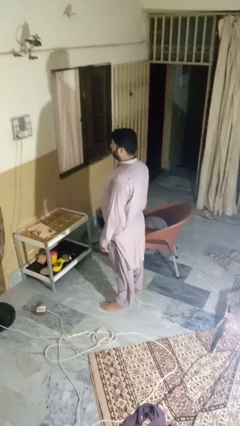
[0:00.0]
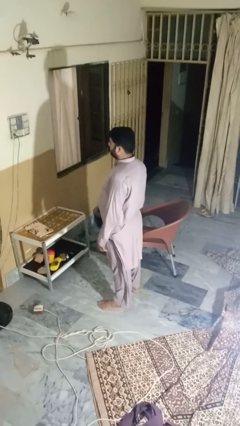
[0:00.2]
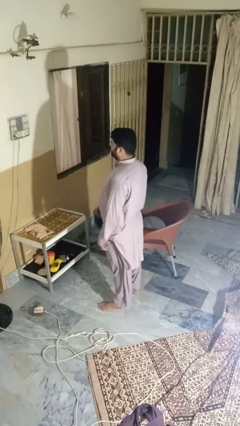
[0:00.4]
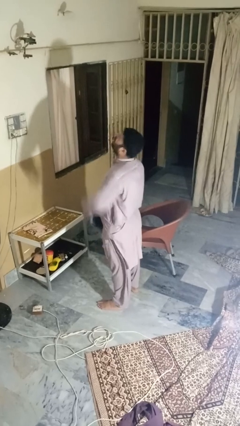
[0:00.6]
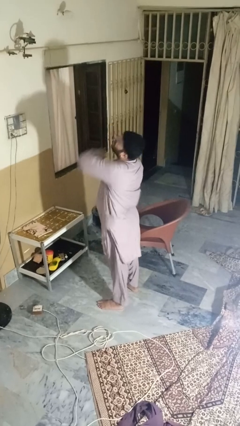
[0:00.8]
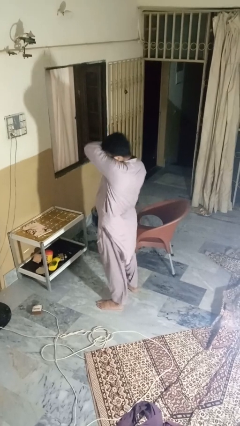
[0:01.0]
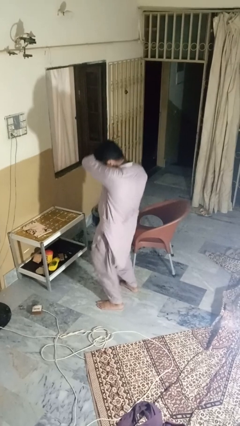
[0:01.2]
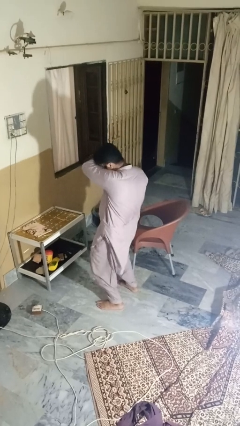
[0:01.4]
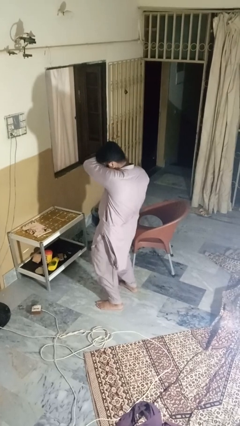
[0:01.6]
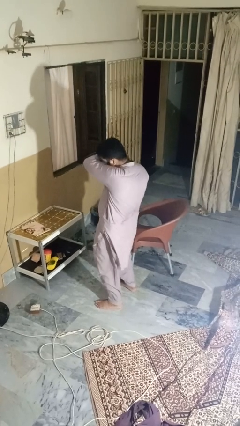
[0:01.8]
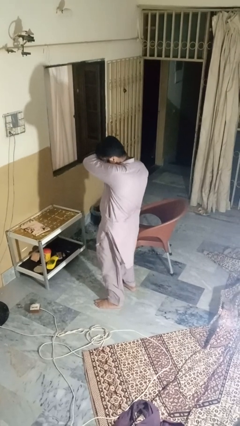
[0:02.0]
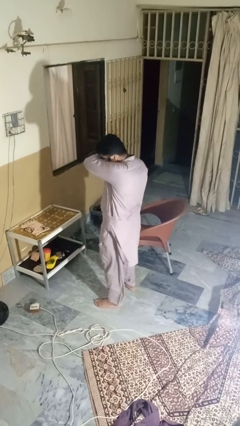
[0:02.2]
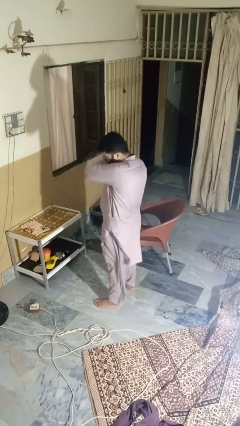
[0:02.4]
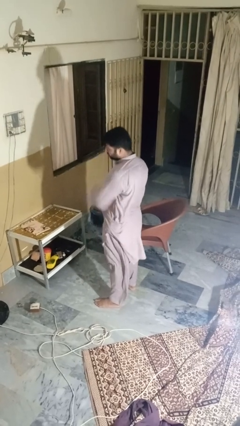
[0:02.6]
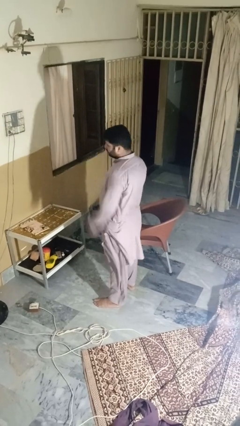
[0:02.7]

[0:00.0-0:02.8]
person sneezes into arm

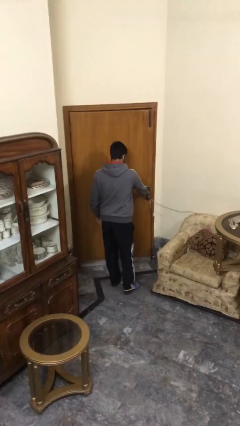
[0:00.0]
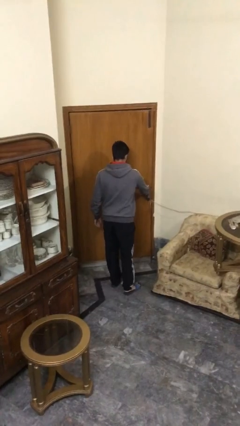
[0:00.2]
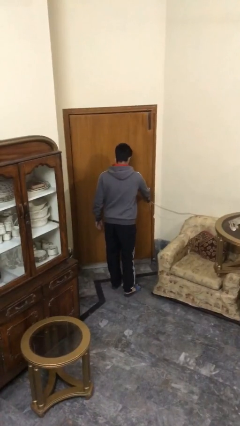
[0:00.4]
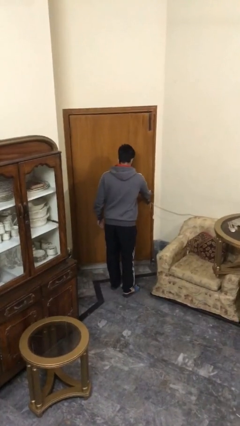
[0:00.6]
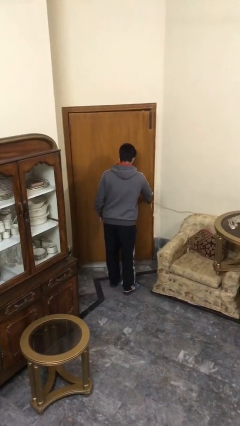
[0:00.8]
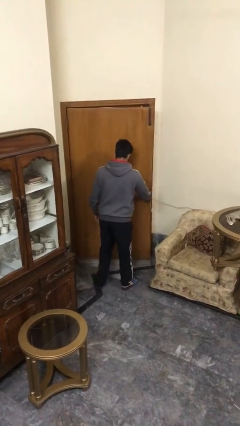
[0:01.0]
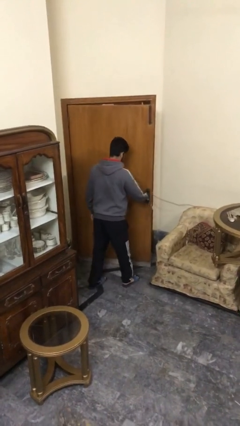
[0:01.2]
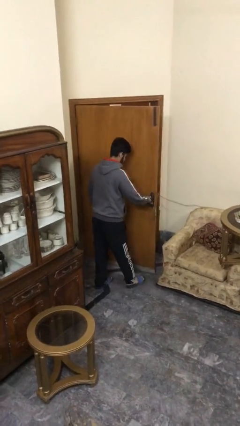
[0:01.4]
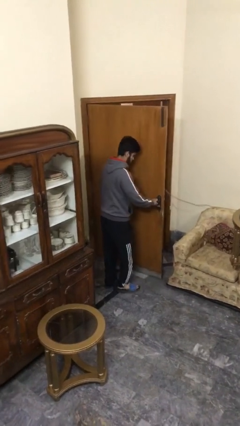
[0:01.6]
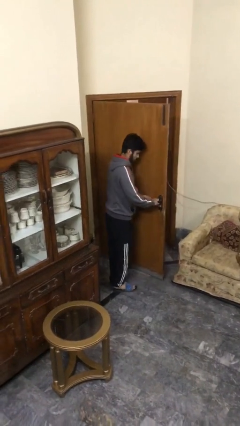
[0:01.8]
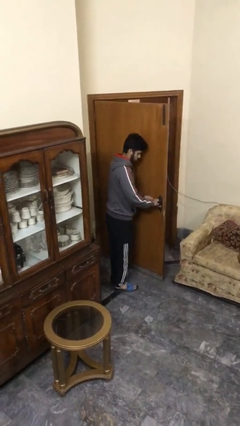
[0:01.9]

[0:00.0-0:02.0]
person opens facility door

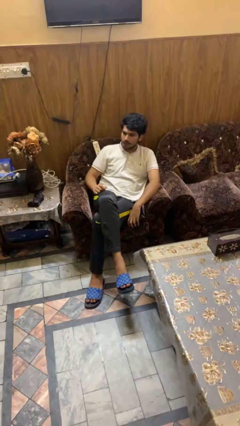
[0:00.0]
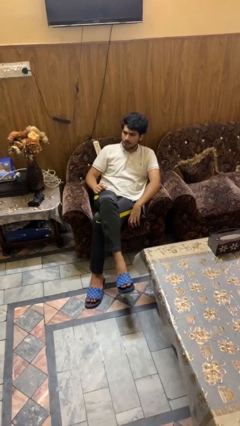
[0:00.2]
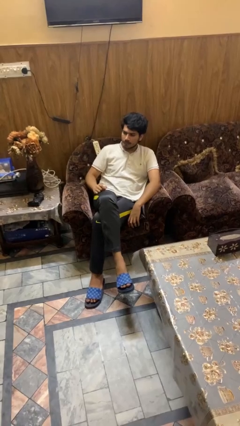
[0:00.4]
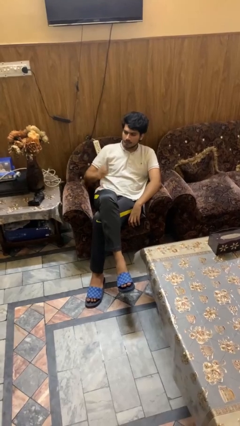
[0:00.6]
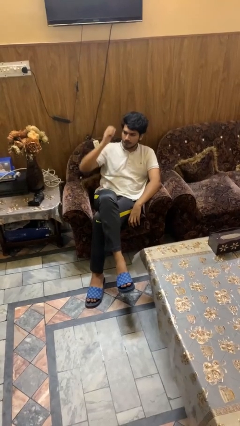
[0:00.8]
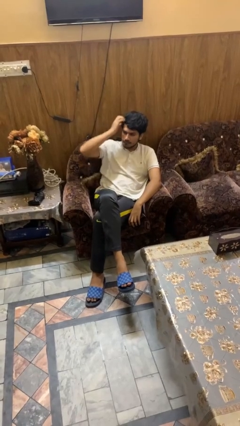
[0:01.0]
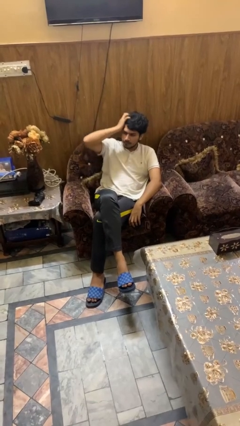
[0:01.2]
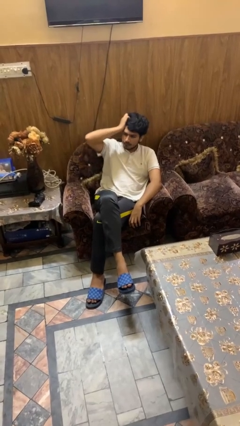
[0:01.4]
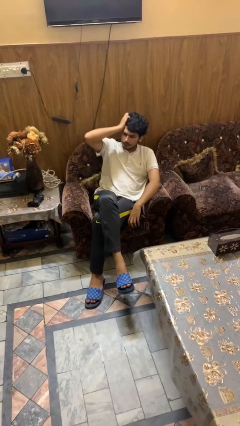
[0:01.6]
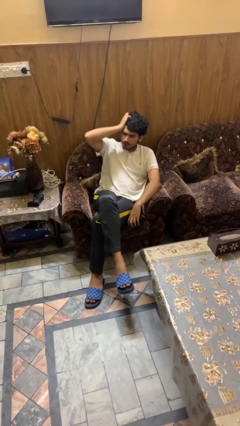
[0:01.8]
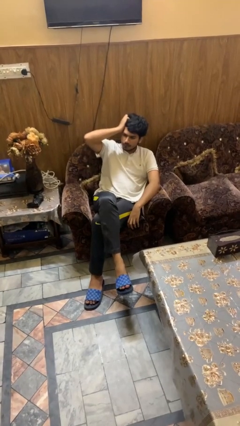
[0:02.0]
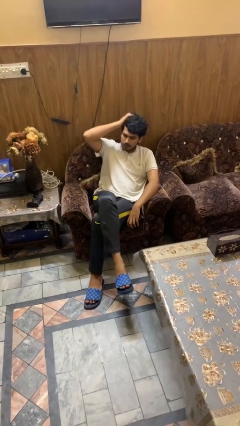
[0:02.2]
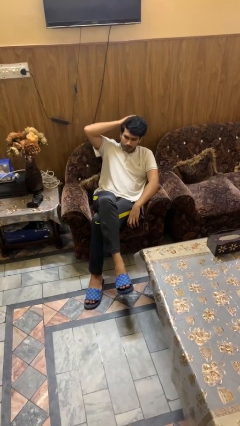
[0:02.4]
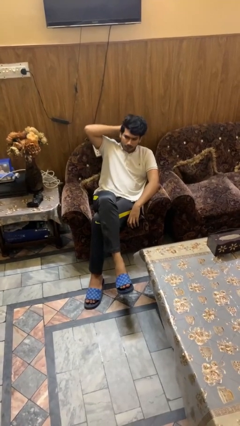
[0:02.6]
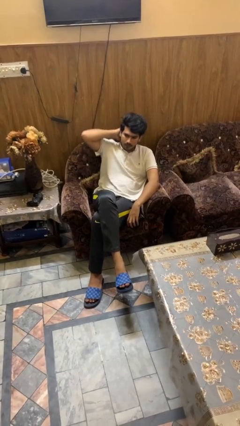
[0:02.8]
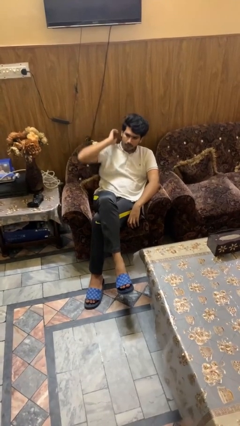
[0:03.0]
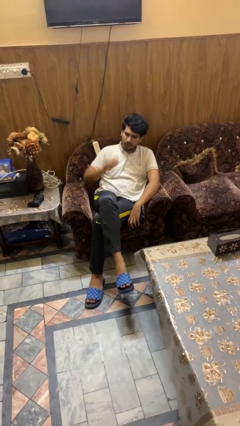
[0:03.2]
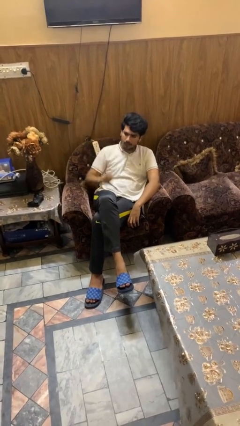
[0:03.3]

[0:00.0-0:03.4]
person scratches face

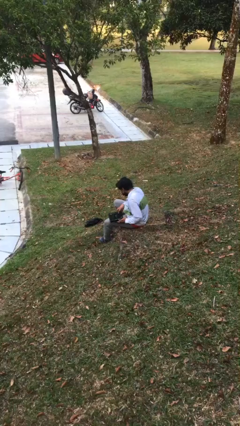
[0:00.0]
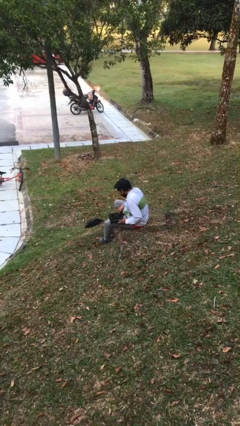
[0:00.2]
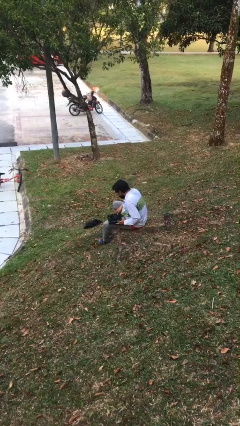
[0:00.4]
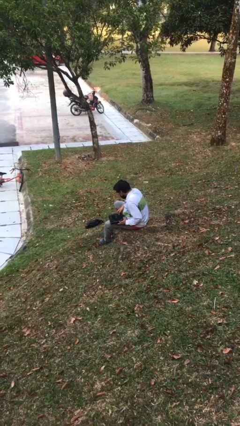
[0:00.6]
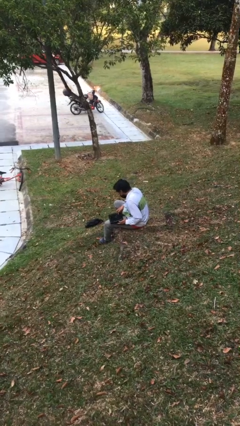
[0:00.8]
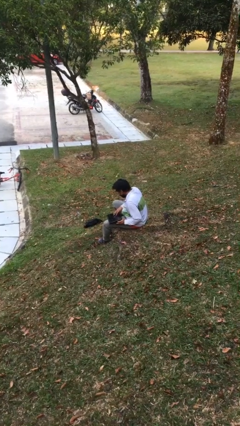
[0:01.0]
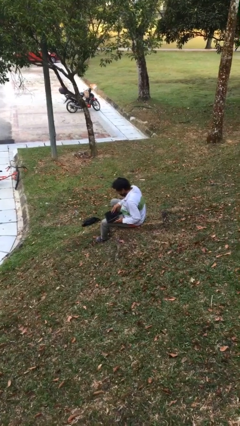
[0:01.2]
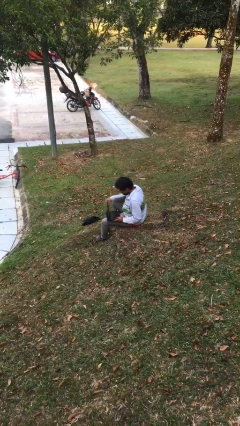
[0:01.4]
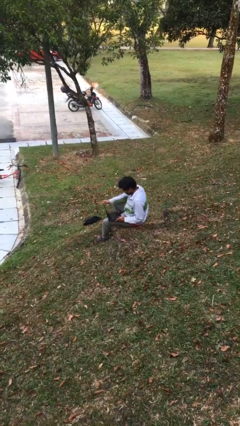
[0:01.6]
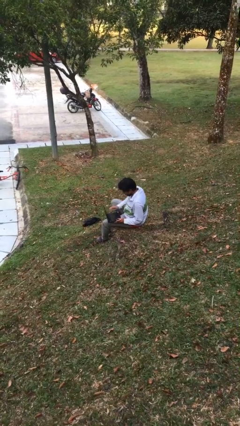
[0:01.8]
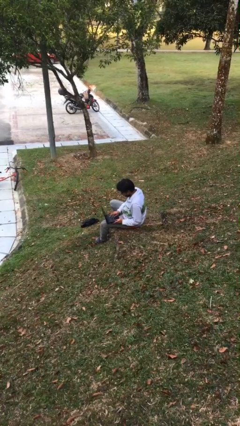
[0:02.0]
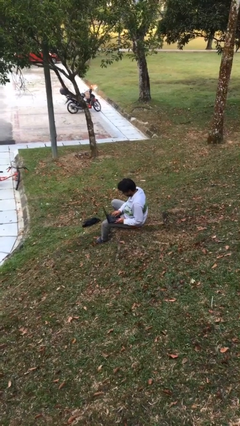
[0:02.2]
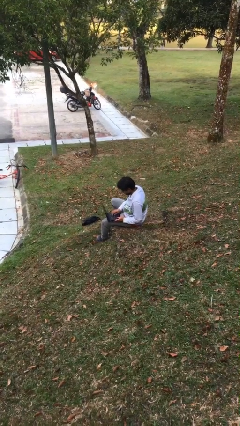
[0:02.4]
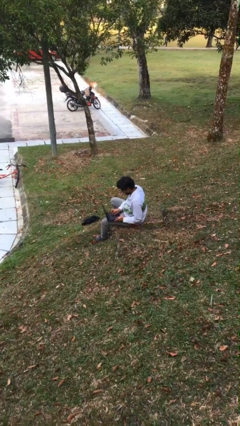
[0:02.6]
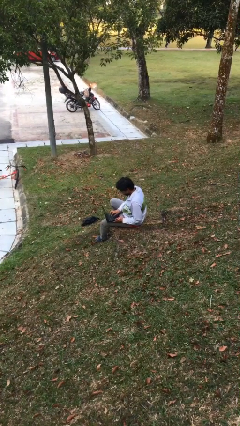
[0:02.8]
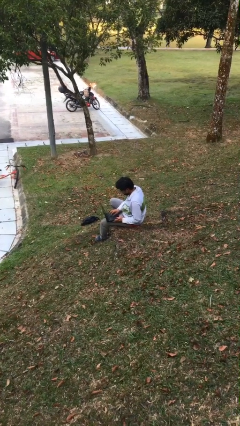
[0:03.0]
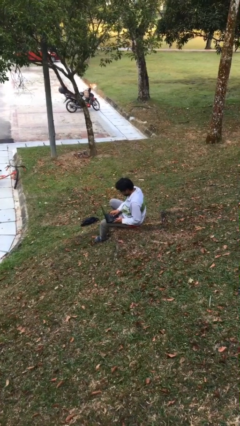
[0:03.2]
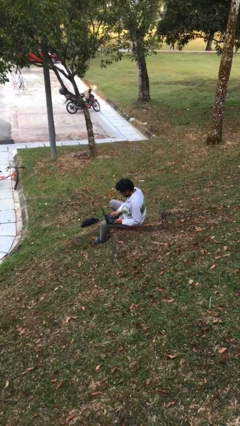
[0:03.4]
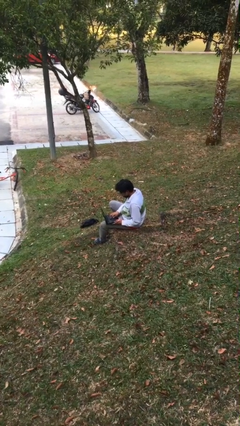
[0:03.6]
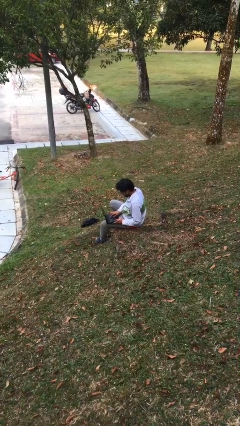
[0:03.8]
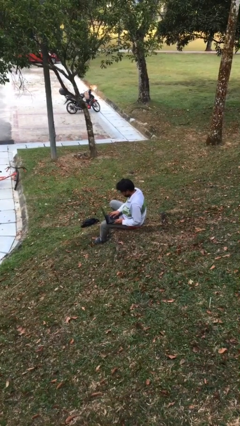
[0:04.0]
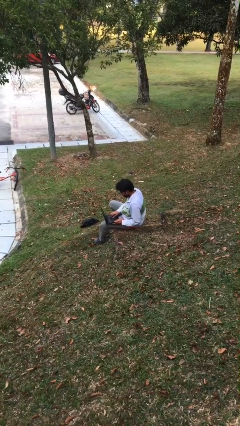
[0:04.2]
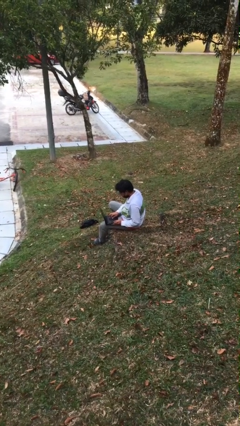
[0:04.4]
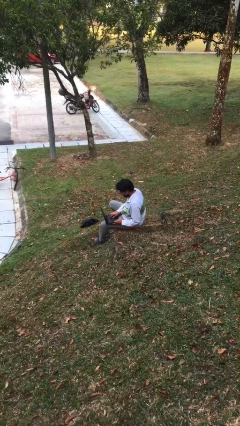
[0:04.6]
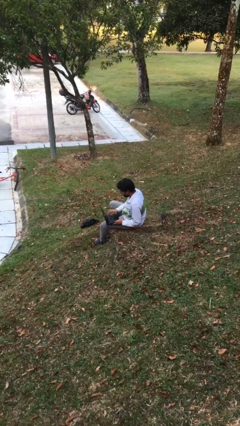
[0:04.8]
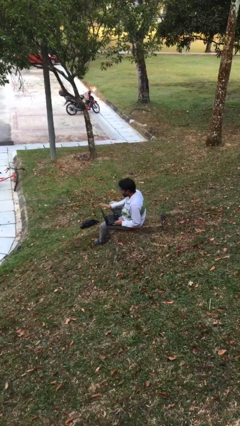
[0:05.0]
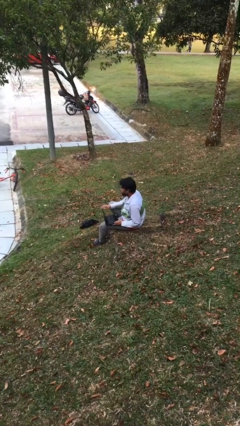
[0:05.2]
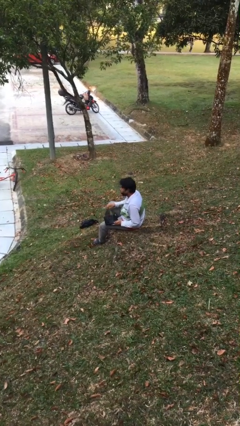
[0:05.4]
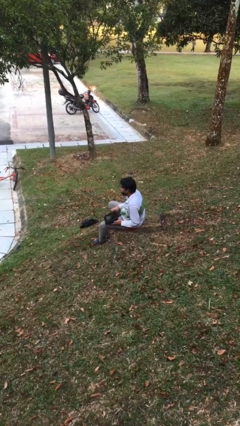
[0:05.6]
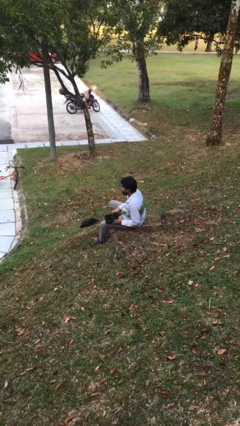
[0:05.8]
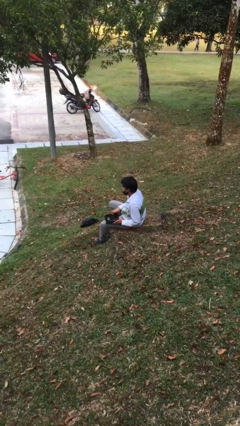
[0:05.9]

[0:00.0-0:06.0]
person interacts with laptop

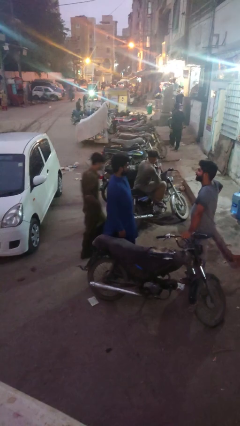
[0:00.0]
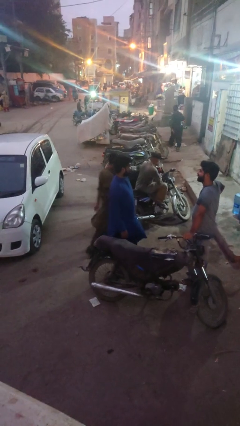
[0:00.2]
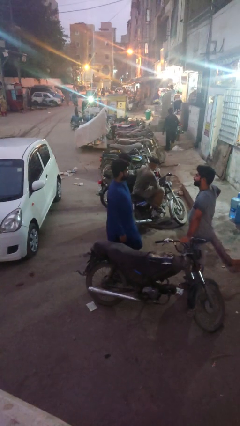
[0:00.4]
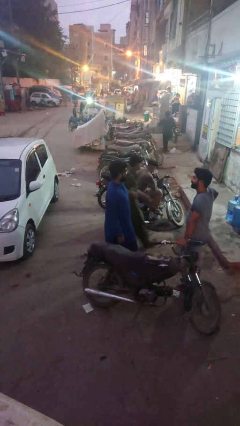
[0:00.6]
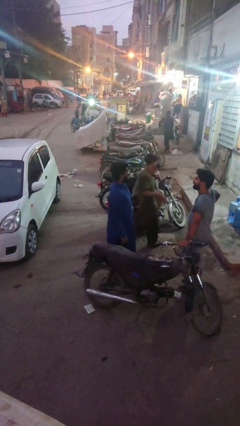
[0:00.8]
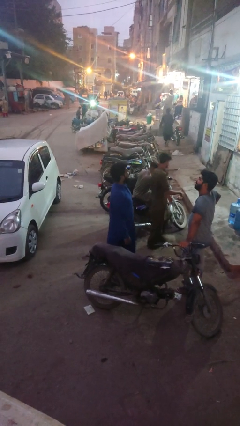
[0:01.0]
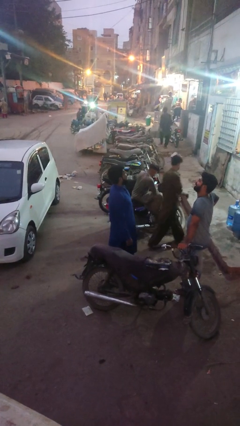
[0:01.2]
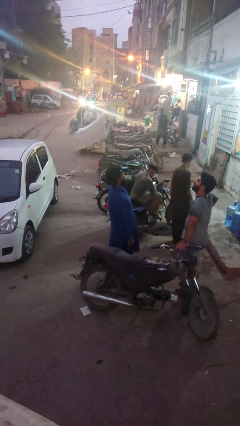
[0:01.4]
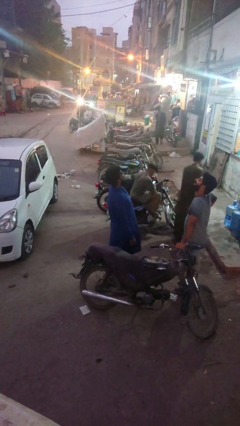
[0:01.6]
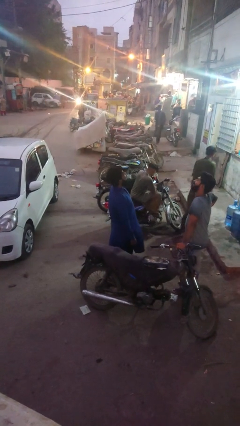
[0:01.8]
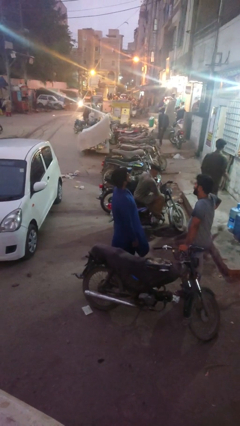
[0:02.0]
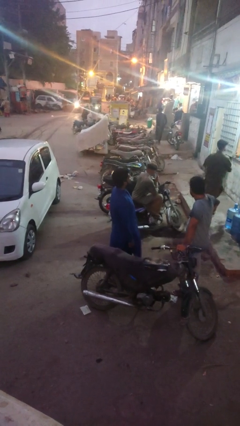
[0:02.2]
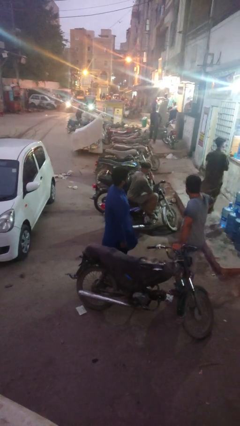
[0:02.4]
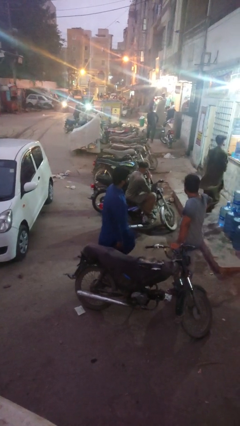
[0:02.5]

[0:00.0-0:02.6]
person laughs with person

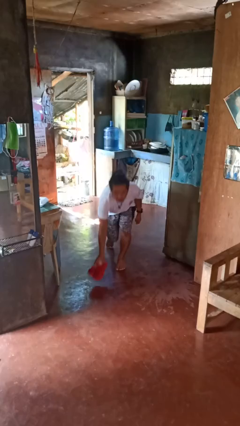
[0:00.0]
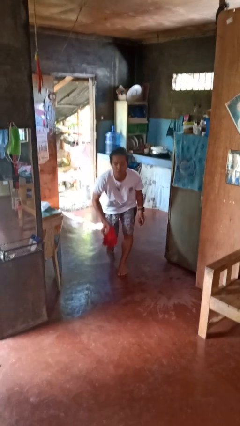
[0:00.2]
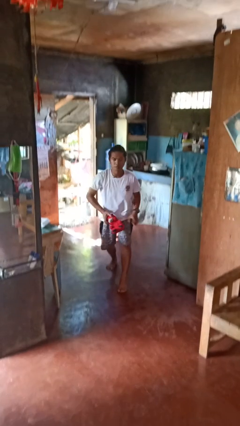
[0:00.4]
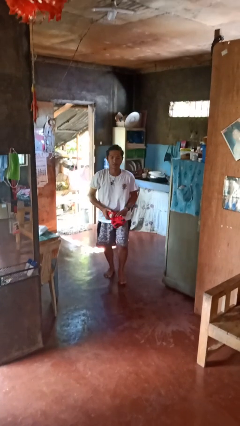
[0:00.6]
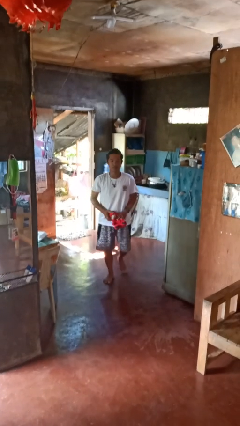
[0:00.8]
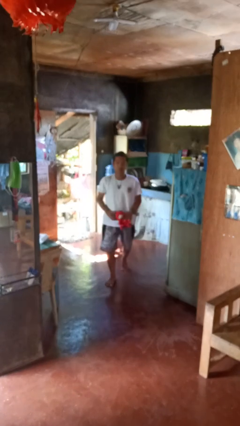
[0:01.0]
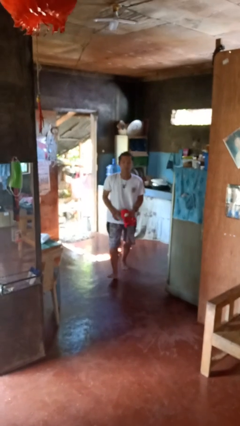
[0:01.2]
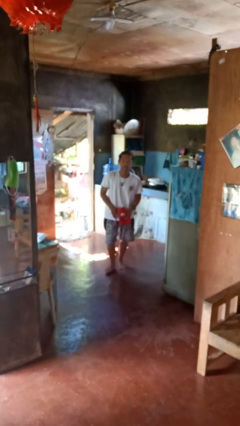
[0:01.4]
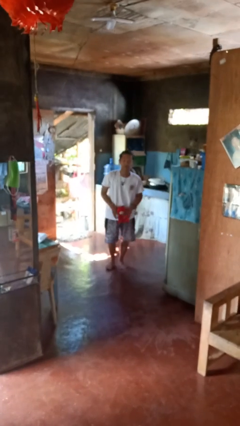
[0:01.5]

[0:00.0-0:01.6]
person picks up object from floor
